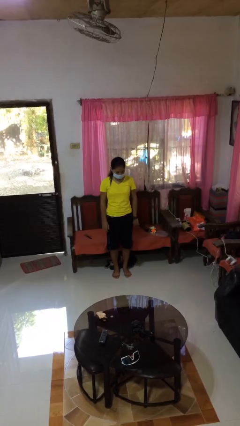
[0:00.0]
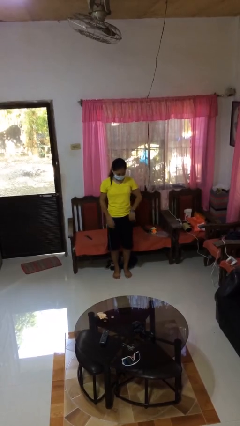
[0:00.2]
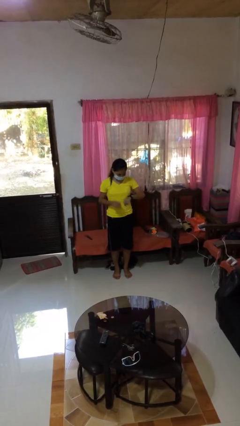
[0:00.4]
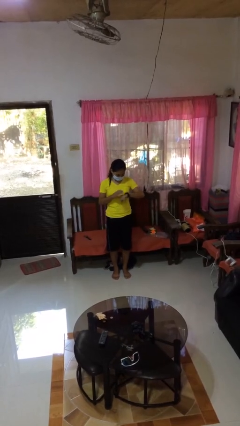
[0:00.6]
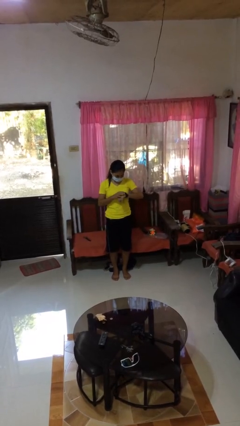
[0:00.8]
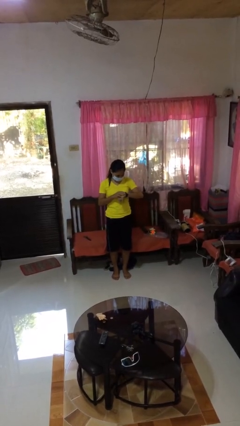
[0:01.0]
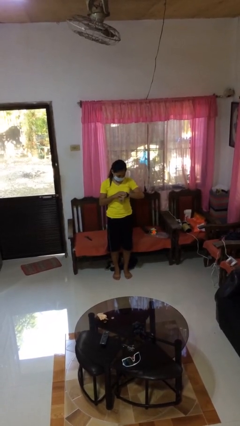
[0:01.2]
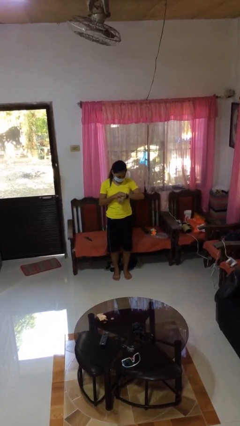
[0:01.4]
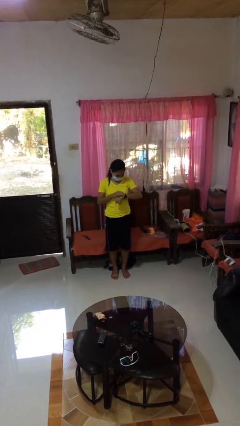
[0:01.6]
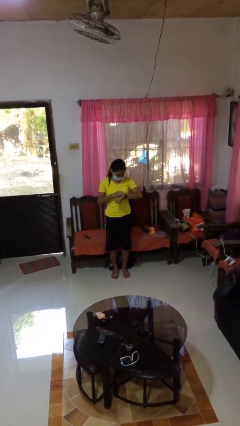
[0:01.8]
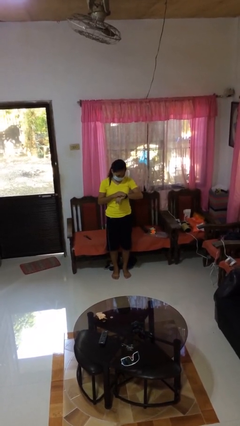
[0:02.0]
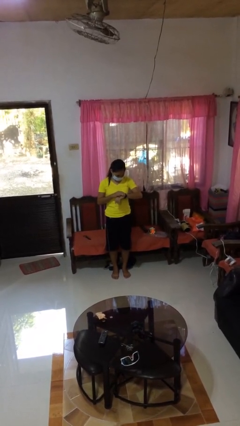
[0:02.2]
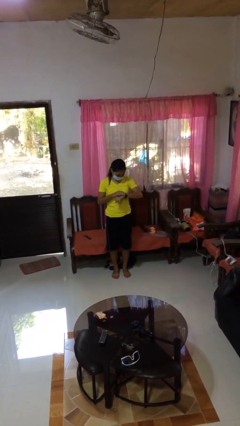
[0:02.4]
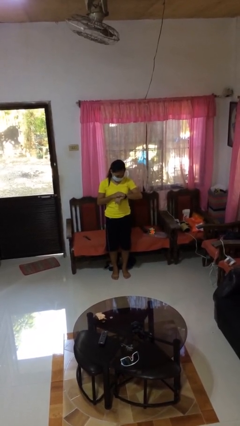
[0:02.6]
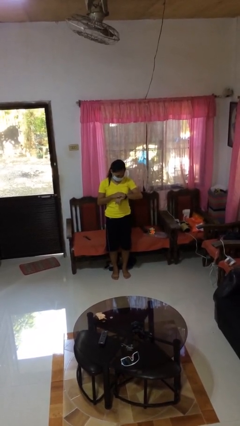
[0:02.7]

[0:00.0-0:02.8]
person looks at wristwatch

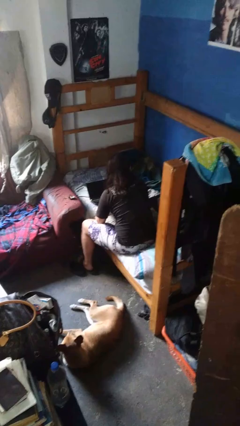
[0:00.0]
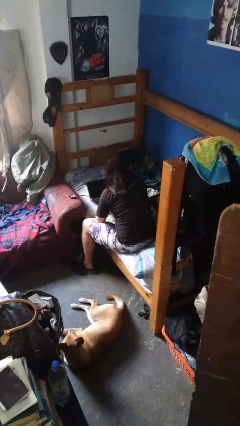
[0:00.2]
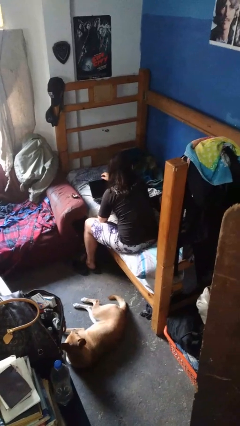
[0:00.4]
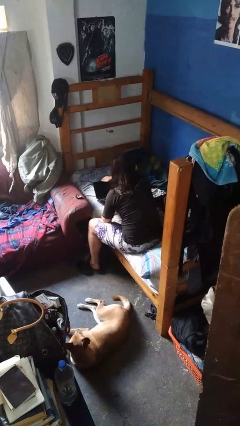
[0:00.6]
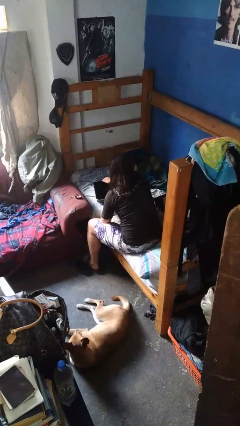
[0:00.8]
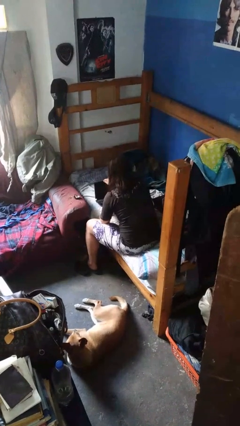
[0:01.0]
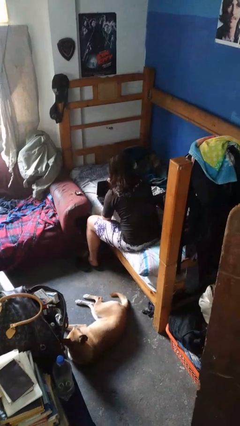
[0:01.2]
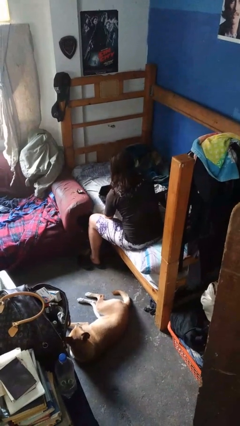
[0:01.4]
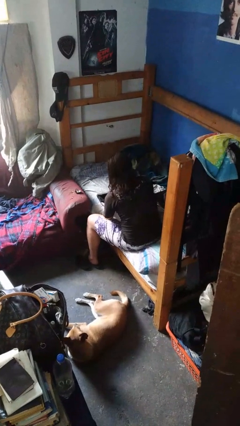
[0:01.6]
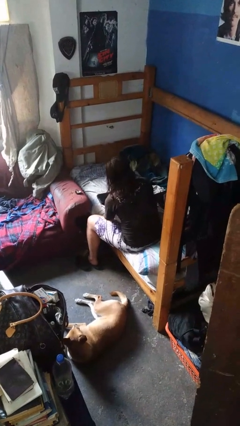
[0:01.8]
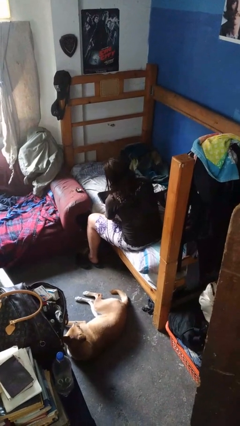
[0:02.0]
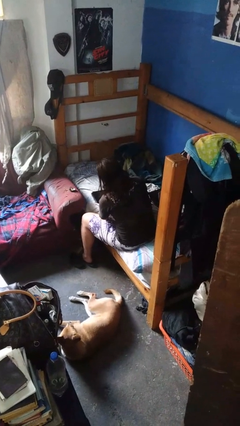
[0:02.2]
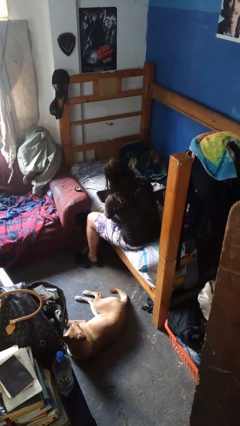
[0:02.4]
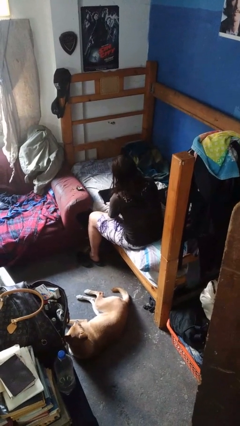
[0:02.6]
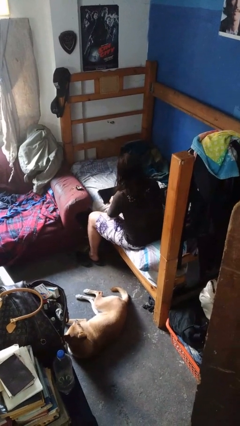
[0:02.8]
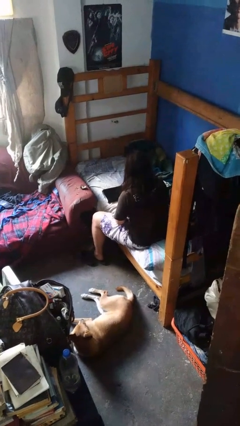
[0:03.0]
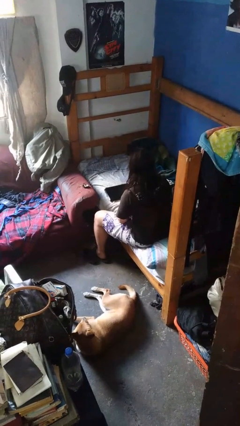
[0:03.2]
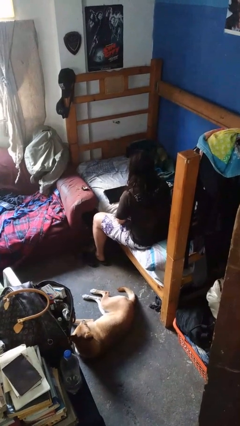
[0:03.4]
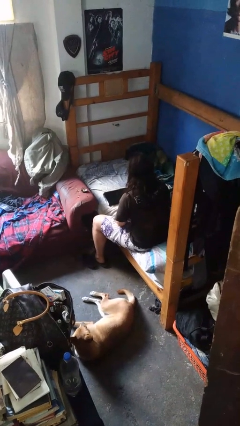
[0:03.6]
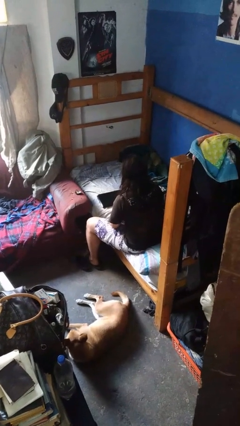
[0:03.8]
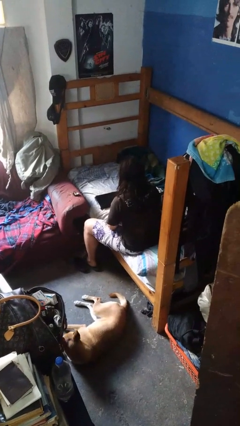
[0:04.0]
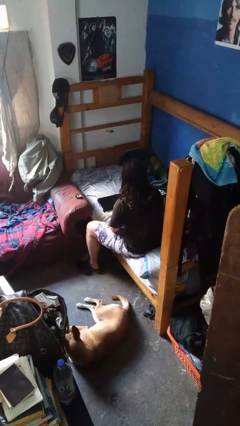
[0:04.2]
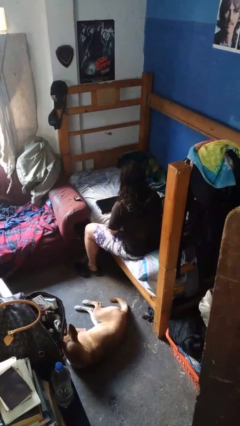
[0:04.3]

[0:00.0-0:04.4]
person closes laptop

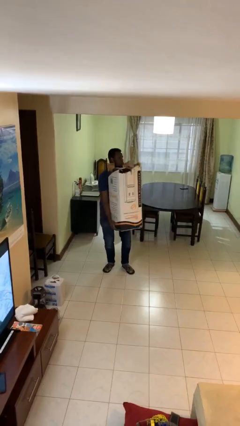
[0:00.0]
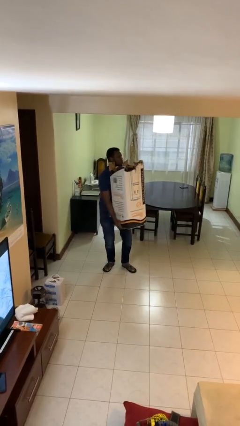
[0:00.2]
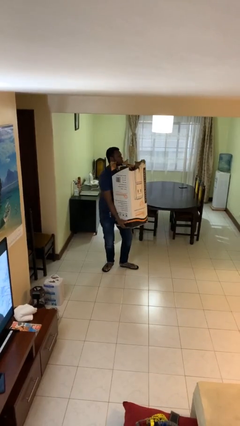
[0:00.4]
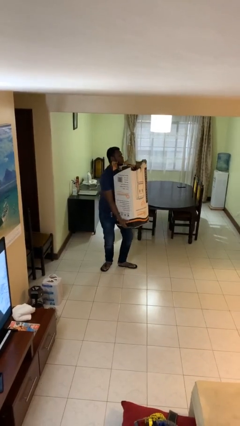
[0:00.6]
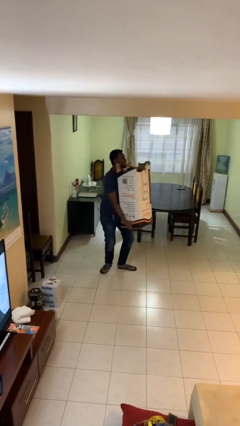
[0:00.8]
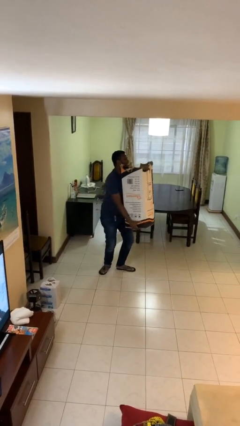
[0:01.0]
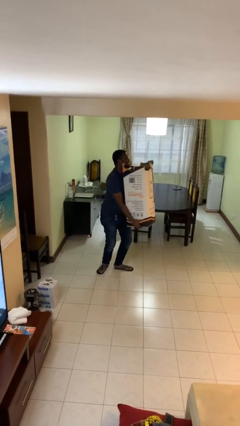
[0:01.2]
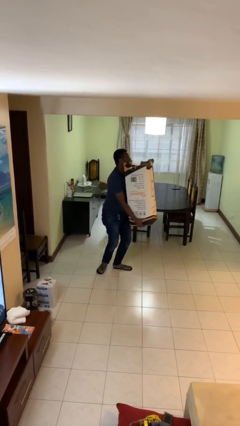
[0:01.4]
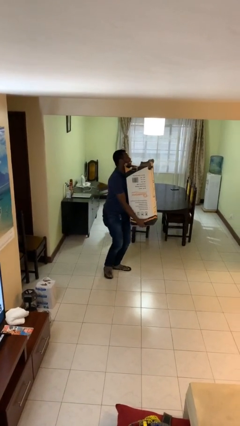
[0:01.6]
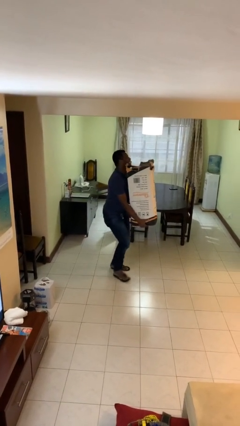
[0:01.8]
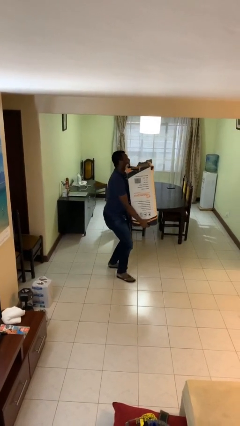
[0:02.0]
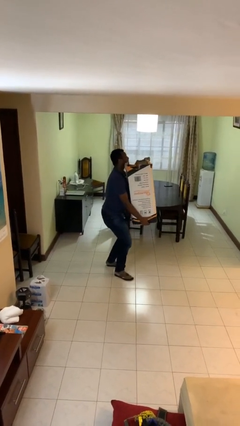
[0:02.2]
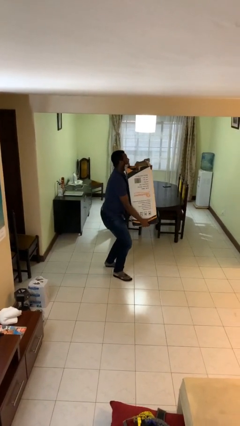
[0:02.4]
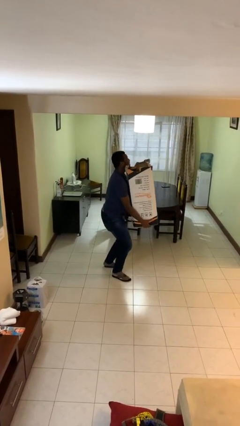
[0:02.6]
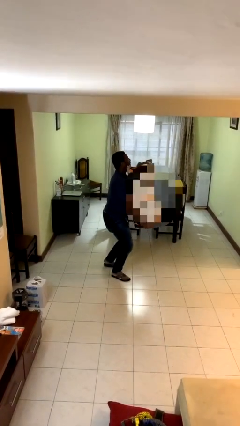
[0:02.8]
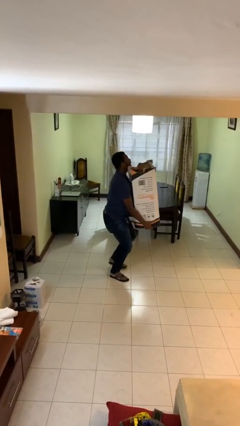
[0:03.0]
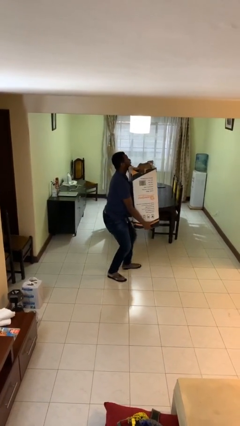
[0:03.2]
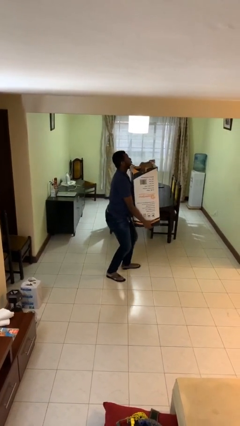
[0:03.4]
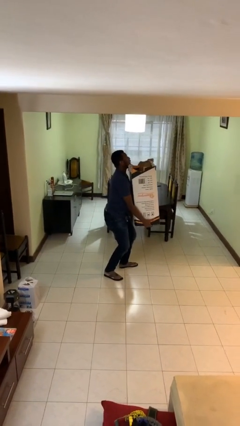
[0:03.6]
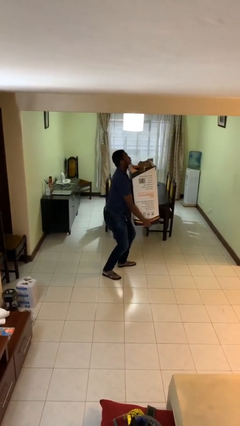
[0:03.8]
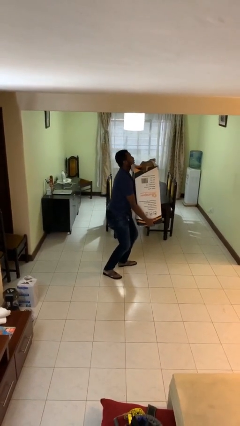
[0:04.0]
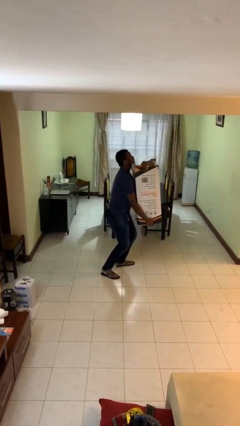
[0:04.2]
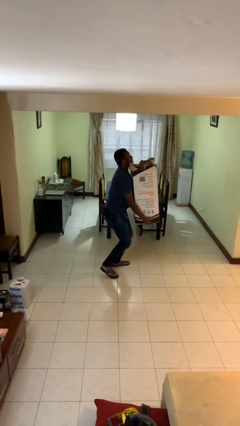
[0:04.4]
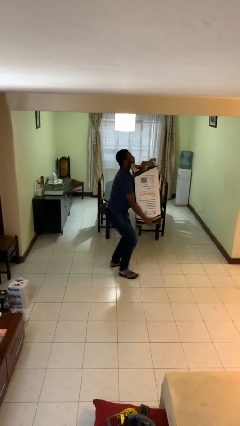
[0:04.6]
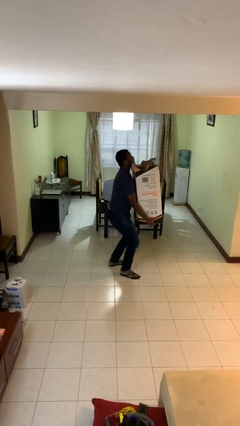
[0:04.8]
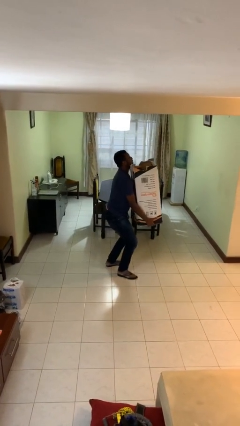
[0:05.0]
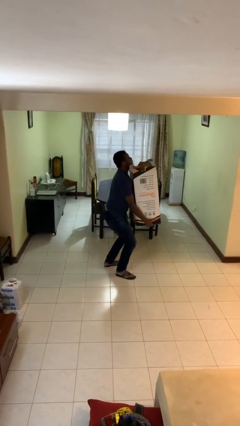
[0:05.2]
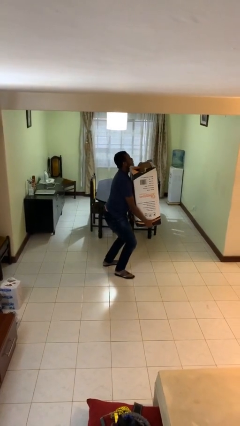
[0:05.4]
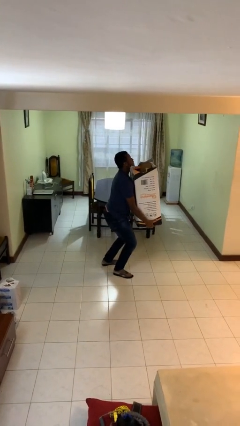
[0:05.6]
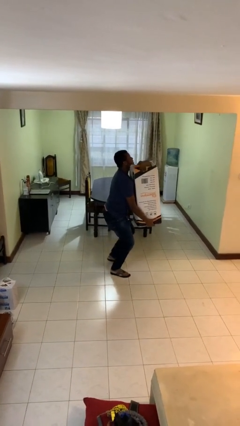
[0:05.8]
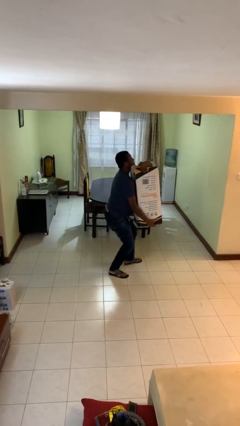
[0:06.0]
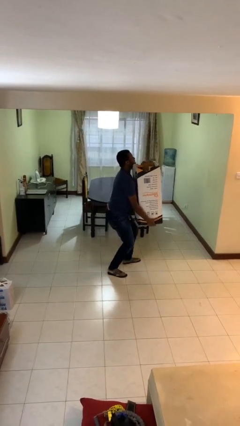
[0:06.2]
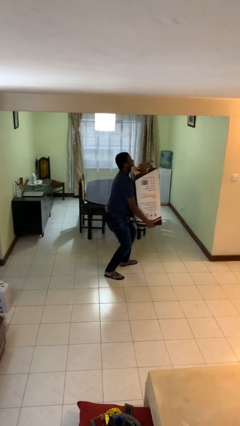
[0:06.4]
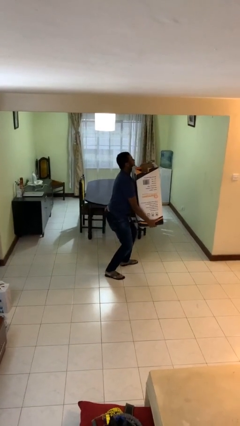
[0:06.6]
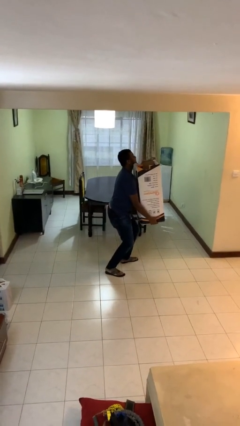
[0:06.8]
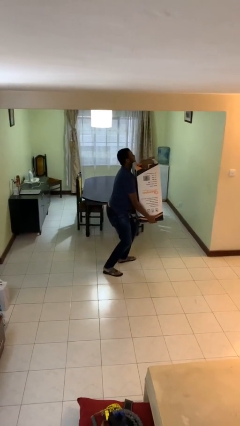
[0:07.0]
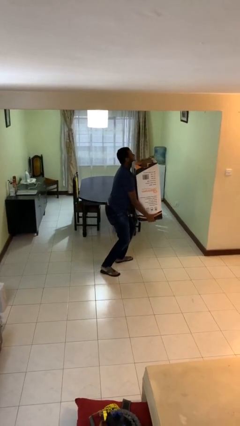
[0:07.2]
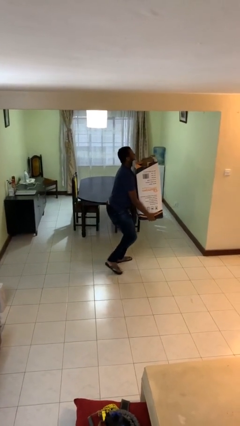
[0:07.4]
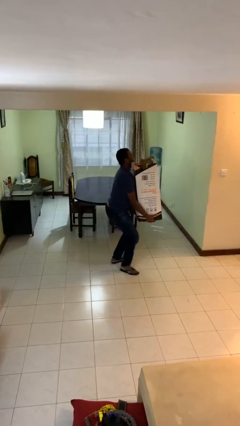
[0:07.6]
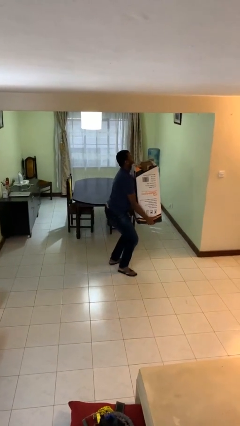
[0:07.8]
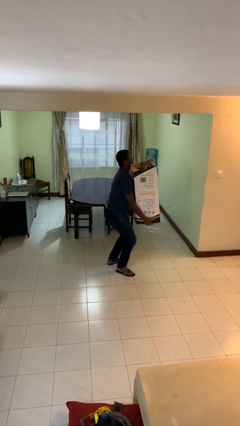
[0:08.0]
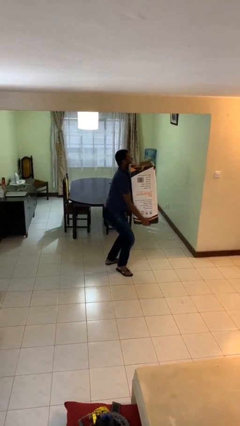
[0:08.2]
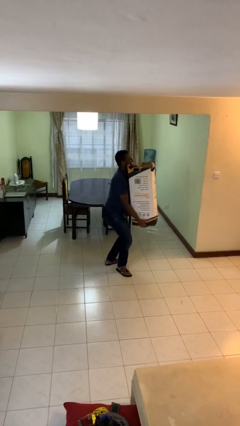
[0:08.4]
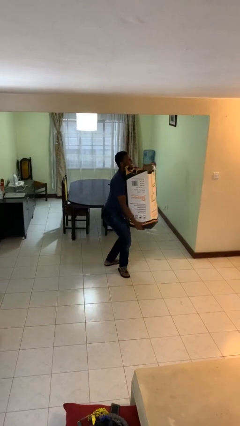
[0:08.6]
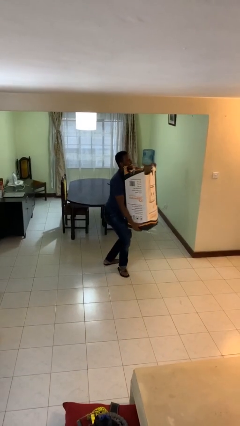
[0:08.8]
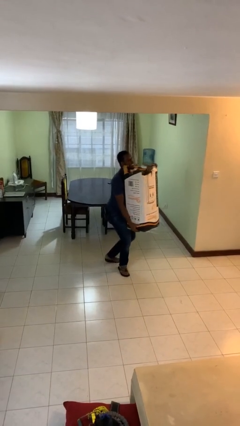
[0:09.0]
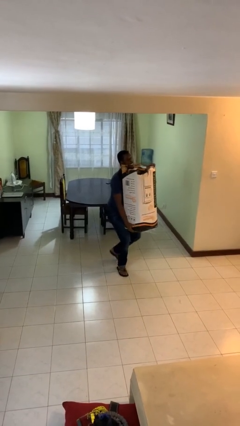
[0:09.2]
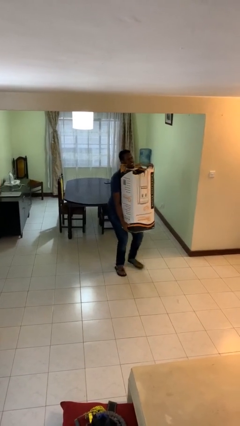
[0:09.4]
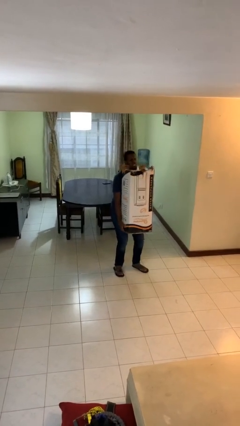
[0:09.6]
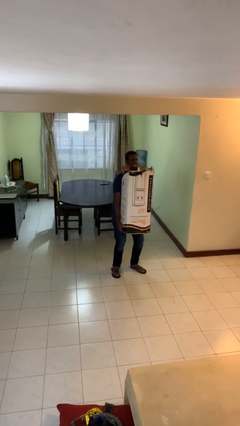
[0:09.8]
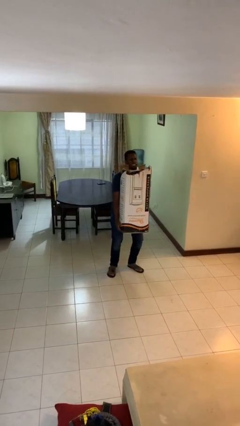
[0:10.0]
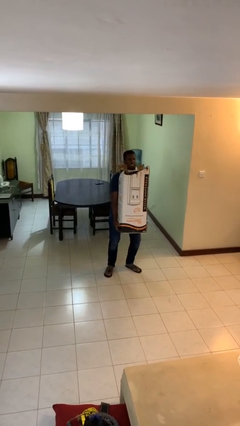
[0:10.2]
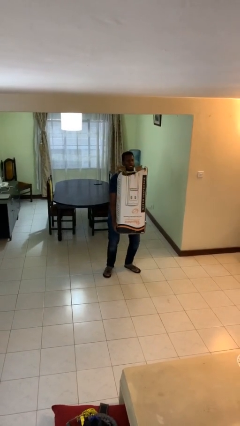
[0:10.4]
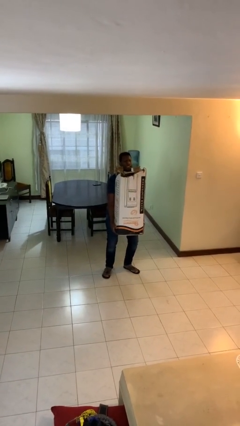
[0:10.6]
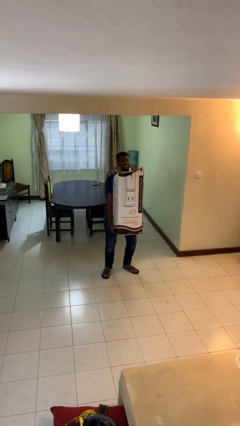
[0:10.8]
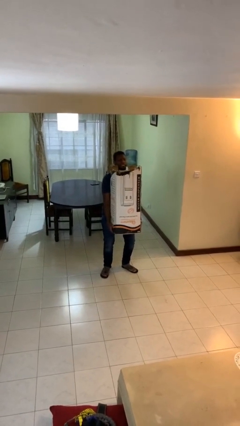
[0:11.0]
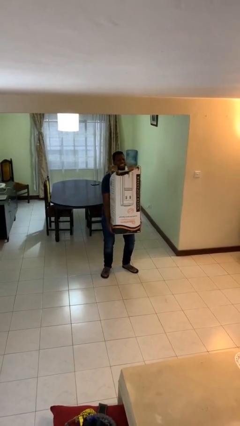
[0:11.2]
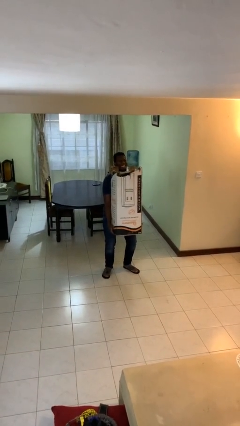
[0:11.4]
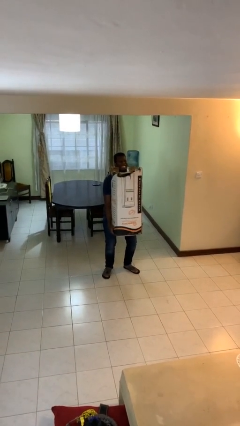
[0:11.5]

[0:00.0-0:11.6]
person carries heavy object
